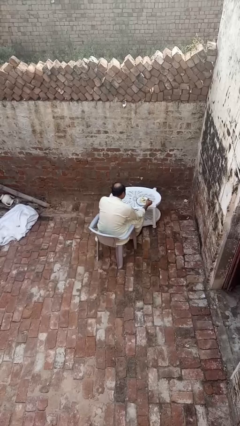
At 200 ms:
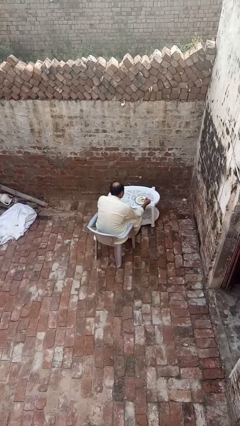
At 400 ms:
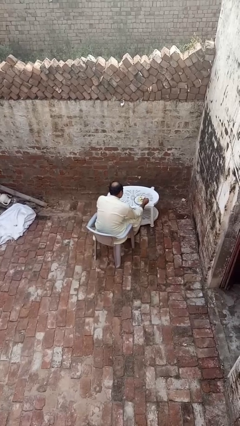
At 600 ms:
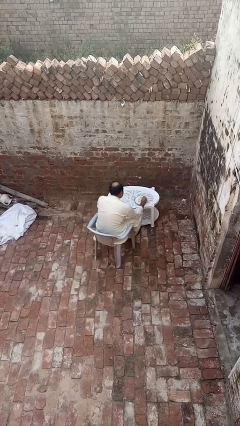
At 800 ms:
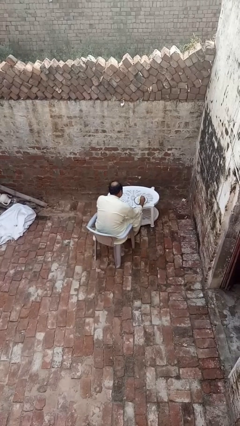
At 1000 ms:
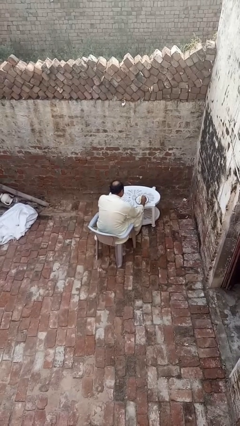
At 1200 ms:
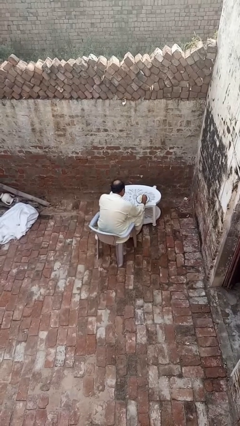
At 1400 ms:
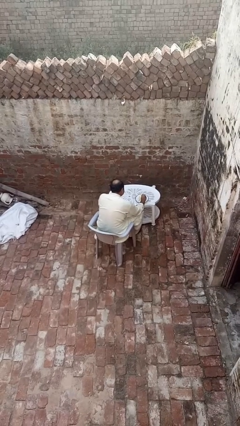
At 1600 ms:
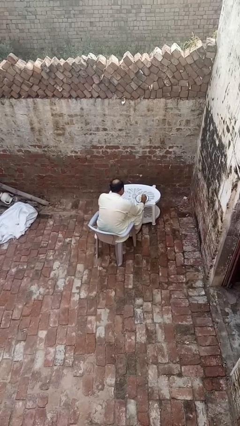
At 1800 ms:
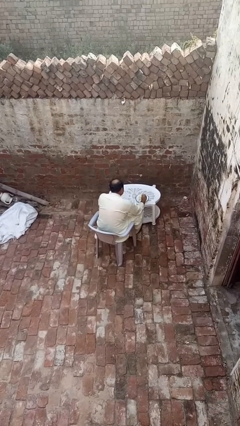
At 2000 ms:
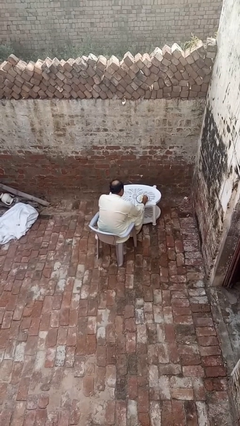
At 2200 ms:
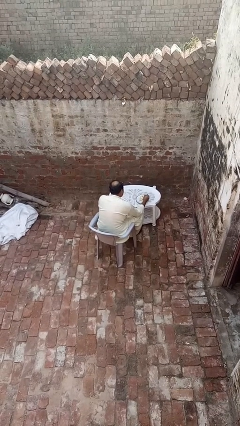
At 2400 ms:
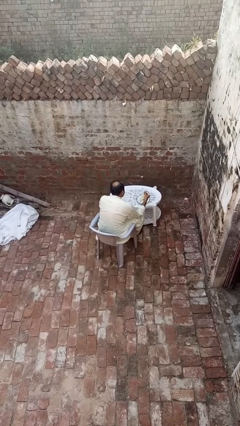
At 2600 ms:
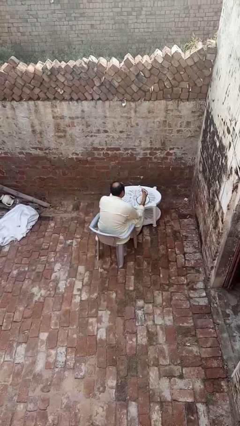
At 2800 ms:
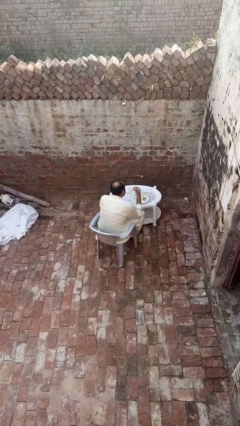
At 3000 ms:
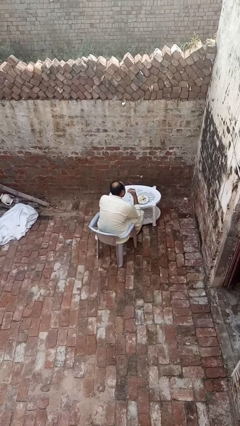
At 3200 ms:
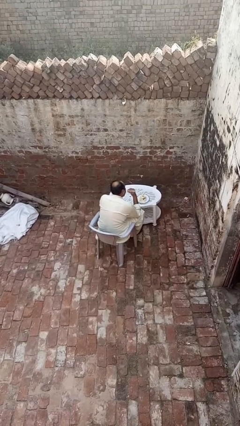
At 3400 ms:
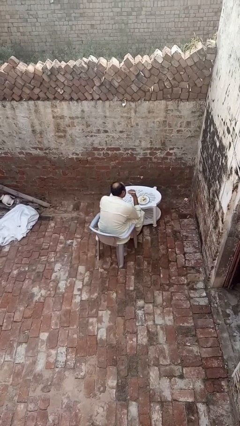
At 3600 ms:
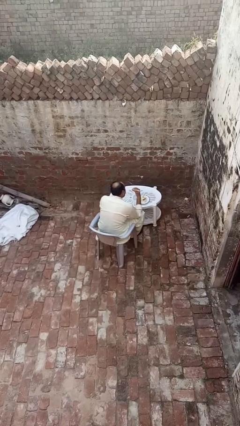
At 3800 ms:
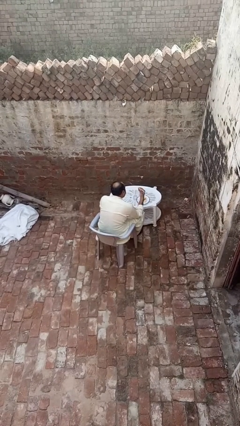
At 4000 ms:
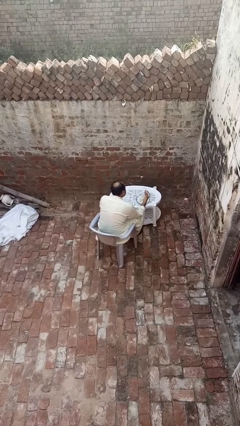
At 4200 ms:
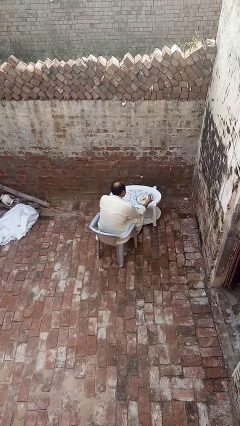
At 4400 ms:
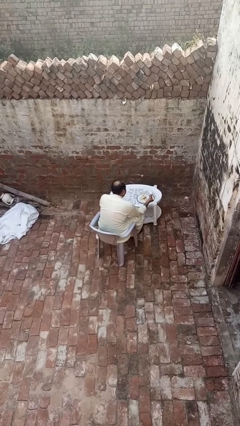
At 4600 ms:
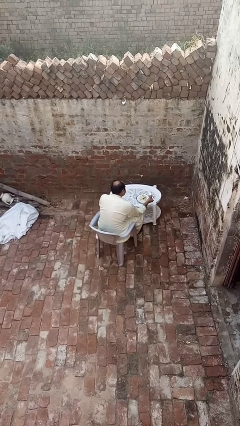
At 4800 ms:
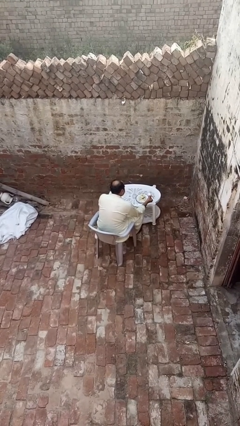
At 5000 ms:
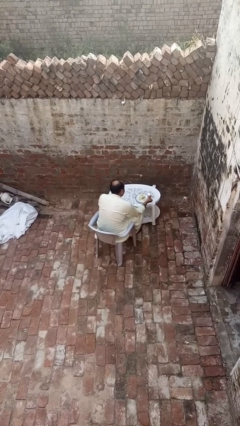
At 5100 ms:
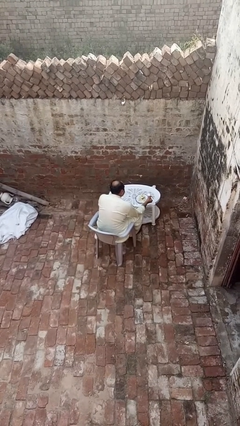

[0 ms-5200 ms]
person eats with utensil

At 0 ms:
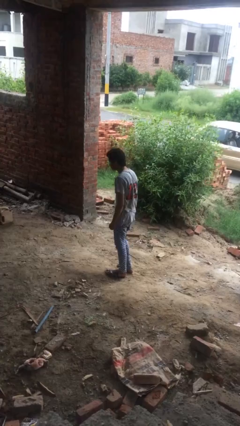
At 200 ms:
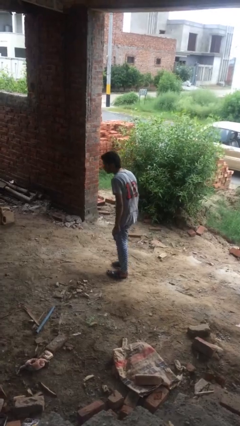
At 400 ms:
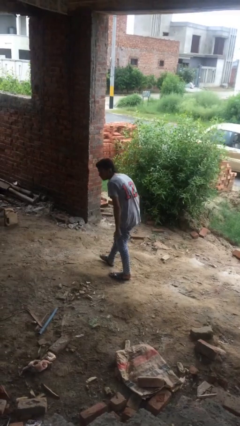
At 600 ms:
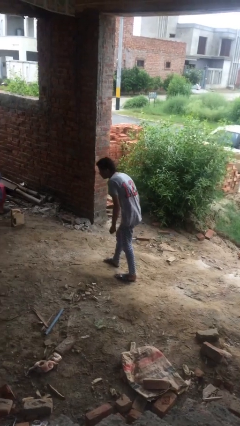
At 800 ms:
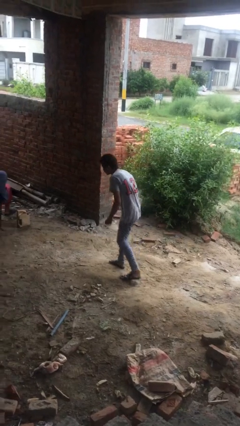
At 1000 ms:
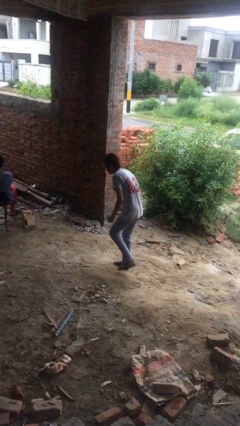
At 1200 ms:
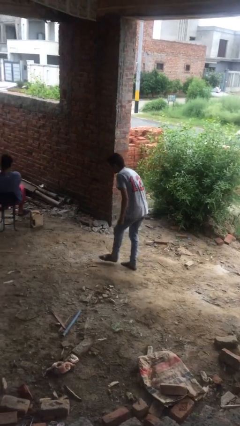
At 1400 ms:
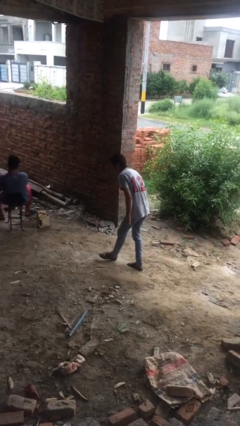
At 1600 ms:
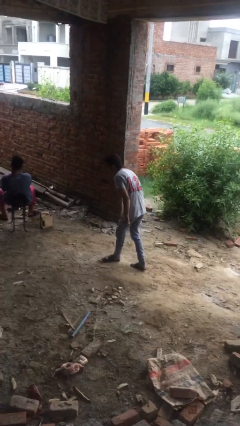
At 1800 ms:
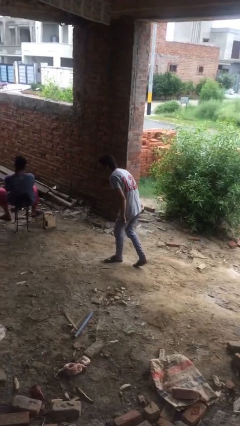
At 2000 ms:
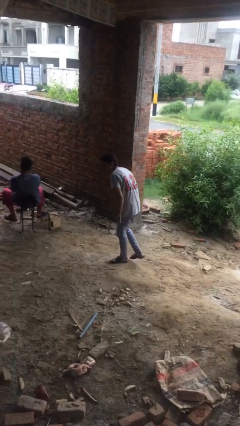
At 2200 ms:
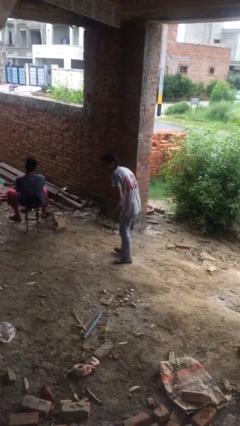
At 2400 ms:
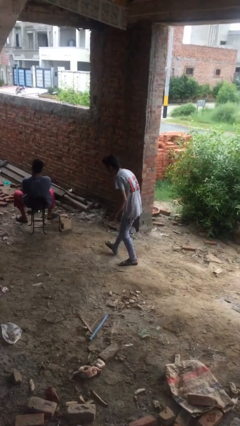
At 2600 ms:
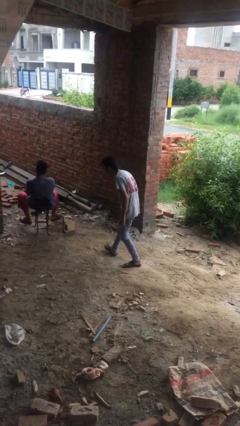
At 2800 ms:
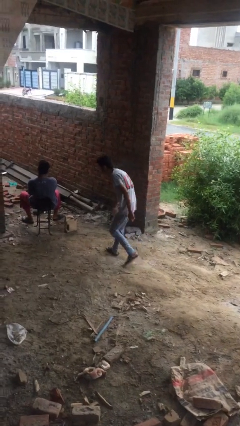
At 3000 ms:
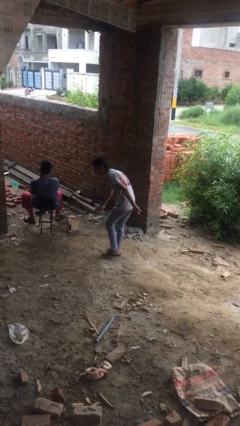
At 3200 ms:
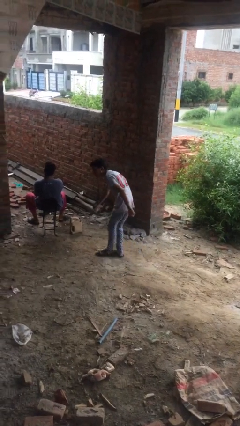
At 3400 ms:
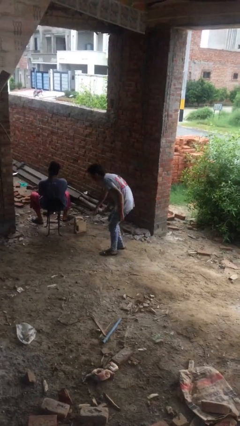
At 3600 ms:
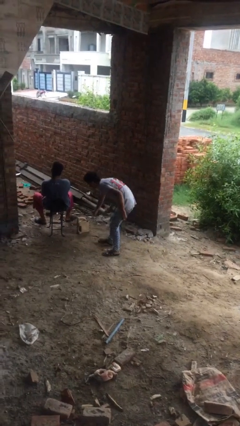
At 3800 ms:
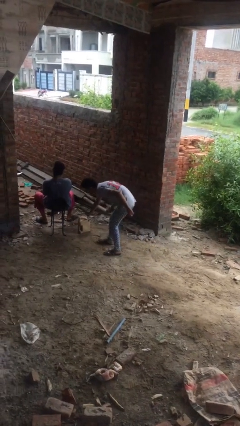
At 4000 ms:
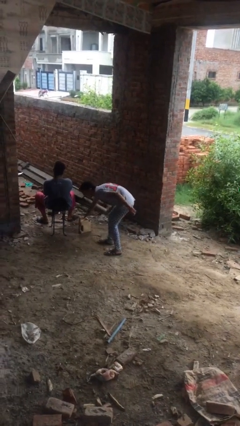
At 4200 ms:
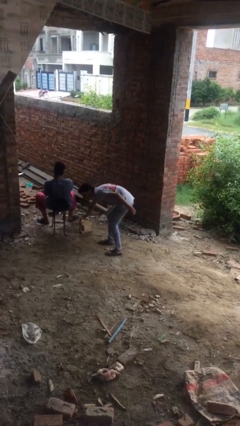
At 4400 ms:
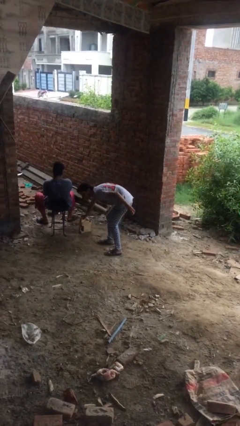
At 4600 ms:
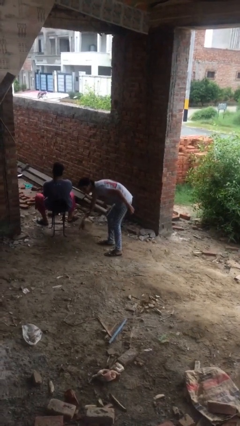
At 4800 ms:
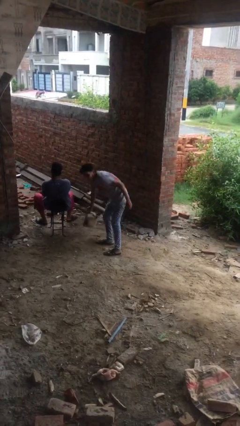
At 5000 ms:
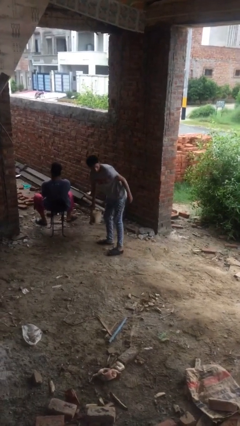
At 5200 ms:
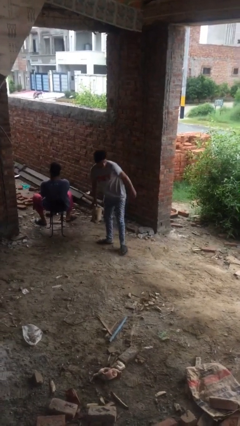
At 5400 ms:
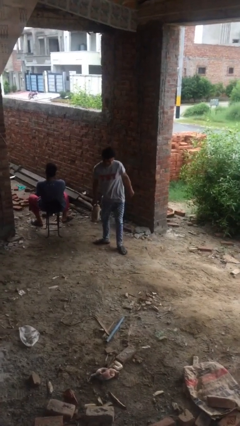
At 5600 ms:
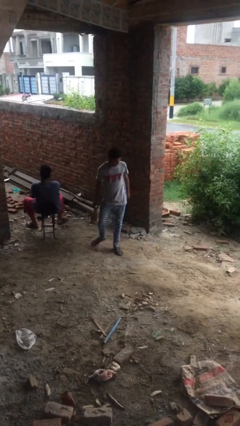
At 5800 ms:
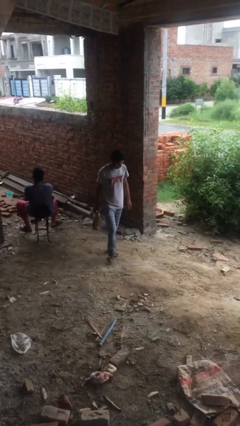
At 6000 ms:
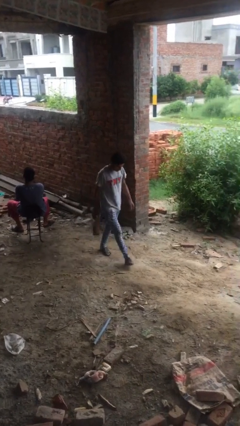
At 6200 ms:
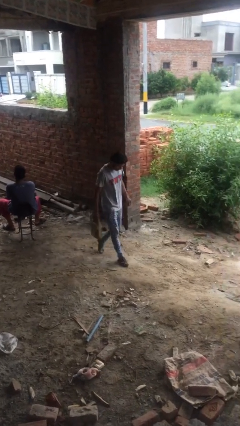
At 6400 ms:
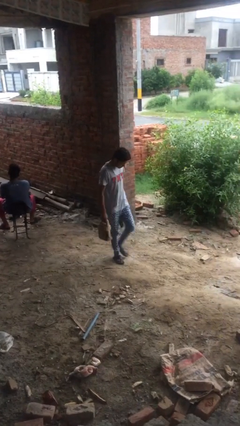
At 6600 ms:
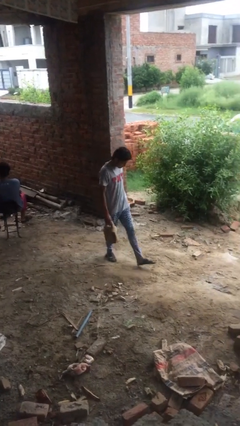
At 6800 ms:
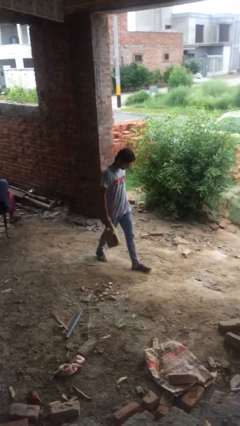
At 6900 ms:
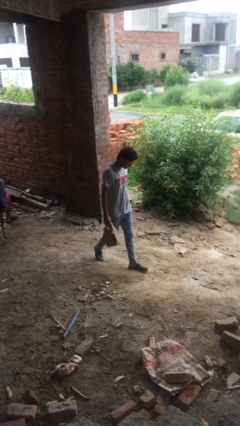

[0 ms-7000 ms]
person steals object from person

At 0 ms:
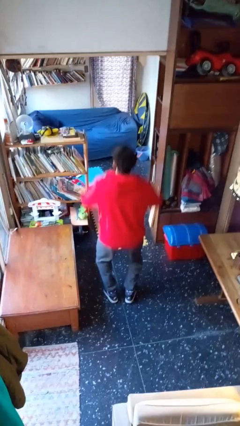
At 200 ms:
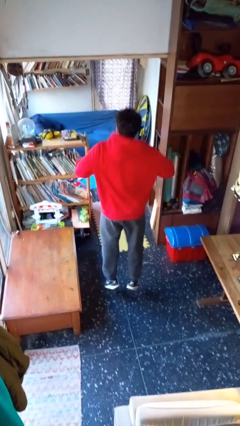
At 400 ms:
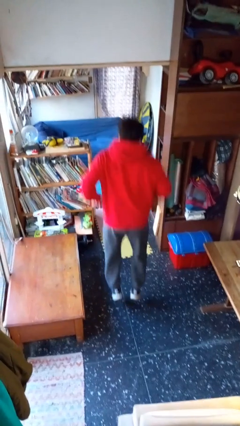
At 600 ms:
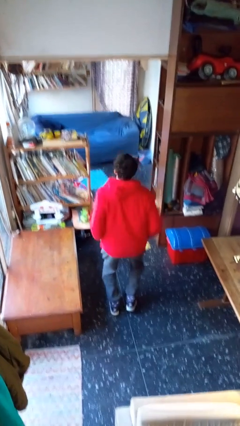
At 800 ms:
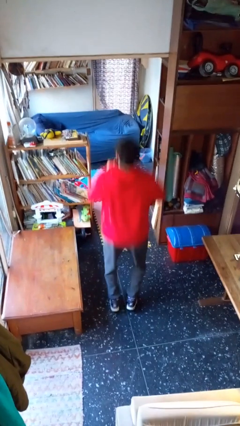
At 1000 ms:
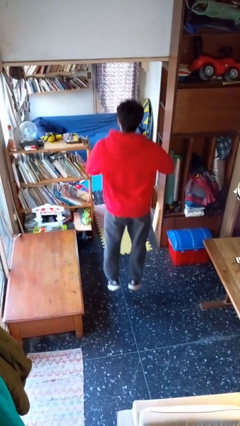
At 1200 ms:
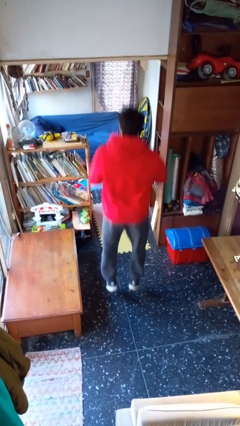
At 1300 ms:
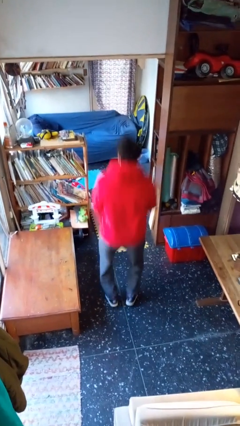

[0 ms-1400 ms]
person jumps

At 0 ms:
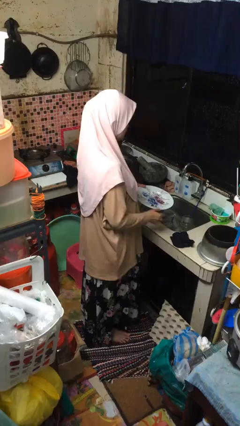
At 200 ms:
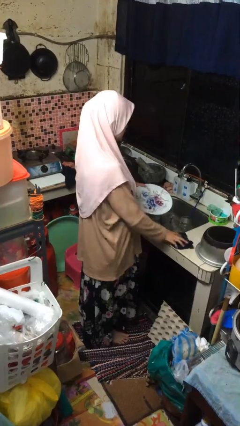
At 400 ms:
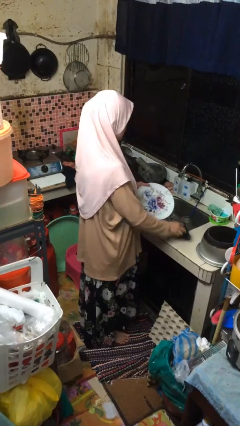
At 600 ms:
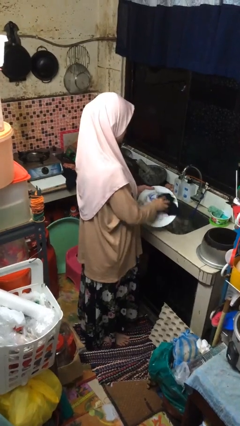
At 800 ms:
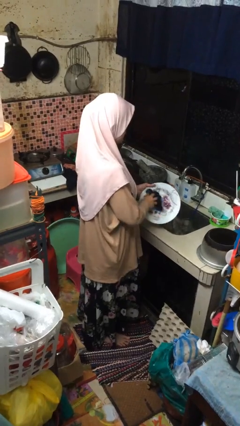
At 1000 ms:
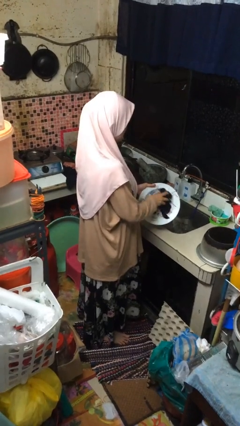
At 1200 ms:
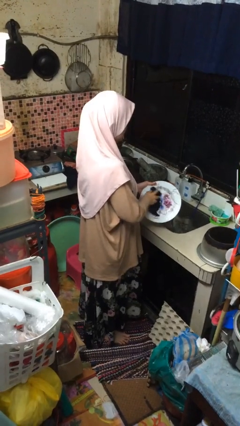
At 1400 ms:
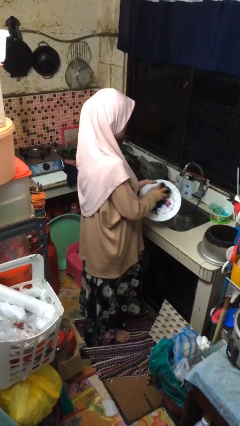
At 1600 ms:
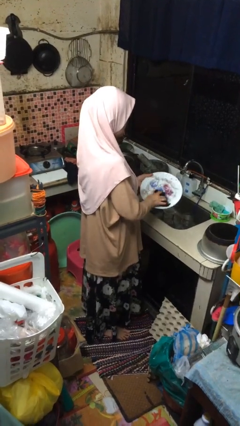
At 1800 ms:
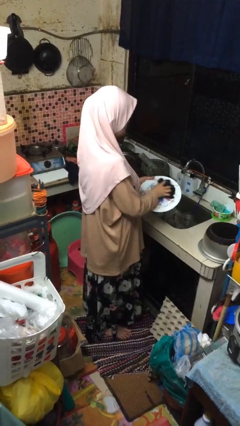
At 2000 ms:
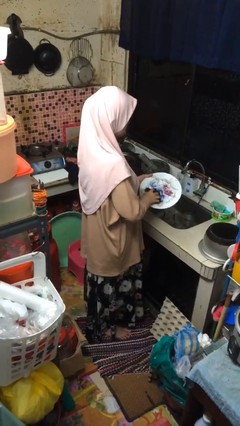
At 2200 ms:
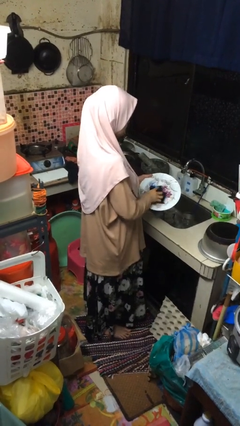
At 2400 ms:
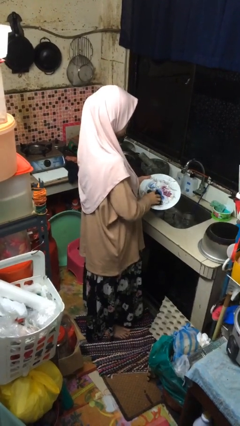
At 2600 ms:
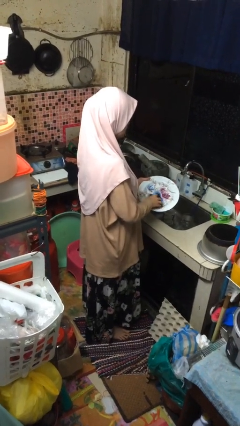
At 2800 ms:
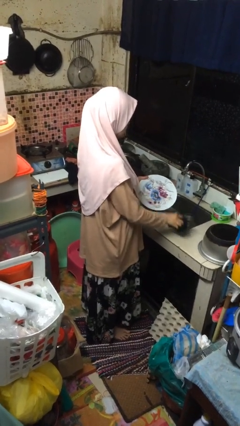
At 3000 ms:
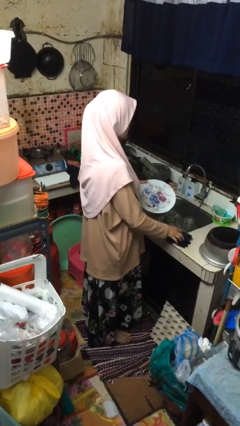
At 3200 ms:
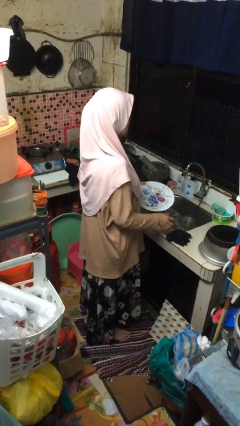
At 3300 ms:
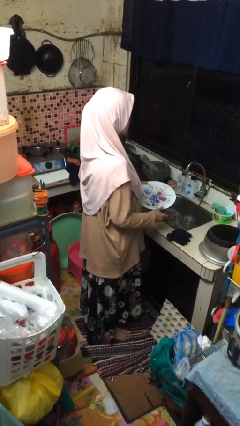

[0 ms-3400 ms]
person dries dish

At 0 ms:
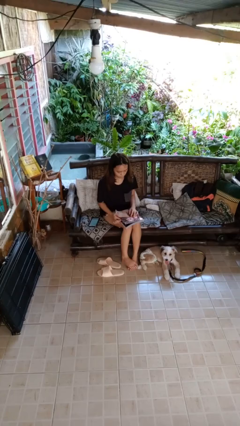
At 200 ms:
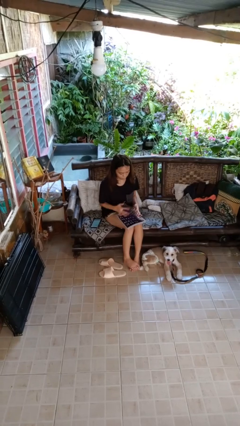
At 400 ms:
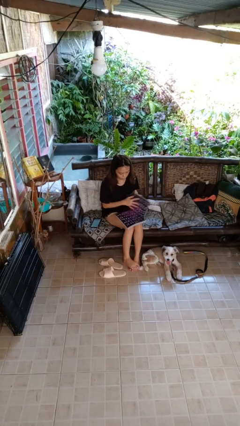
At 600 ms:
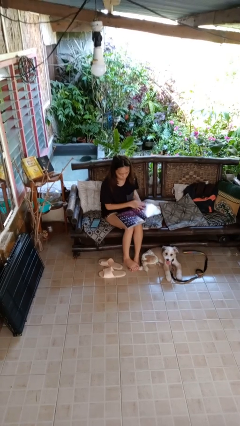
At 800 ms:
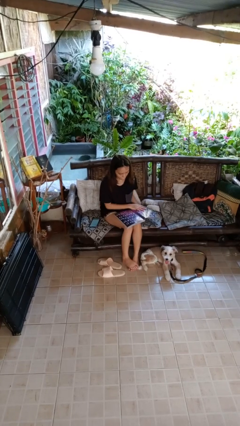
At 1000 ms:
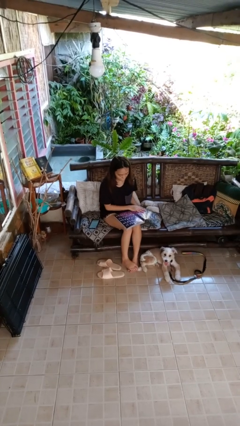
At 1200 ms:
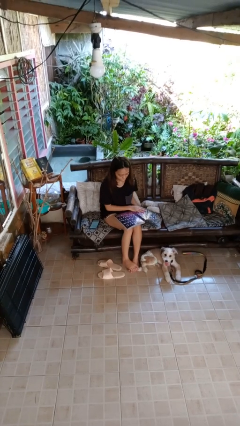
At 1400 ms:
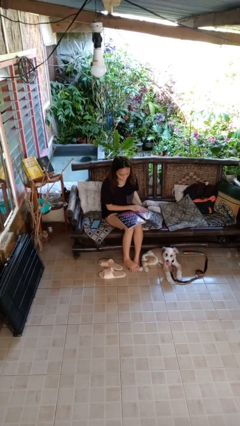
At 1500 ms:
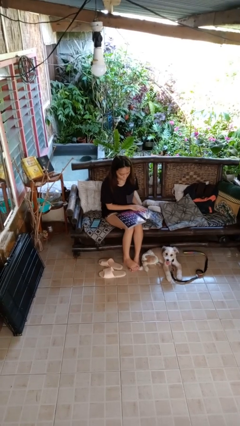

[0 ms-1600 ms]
person reads magazine
